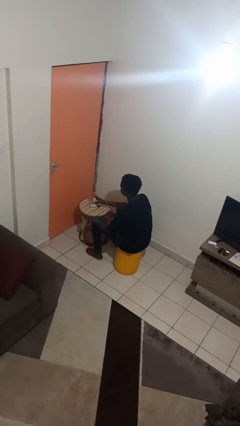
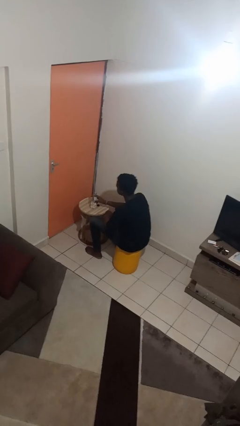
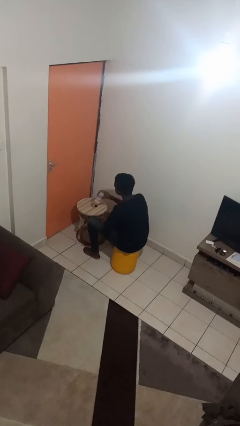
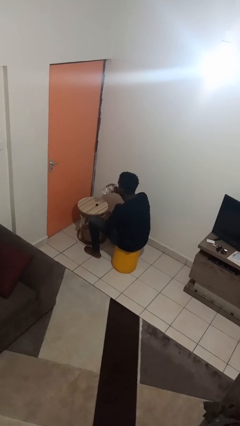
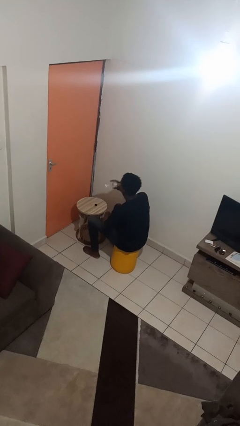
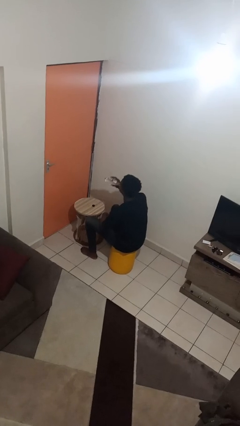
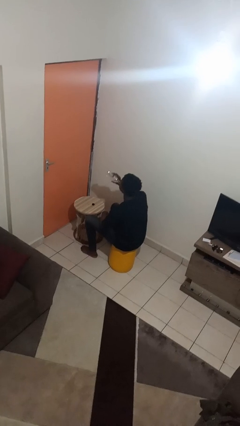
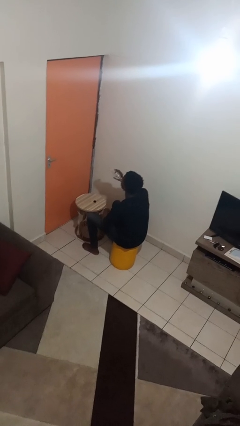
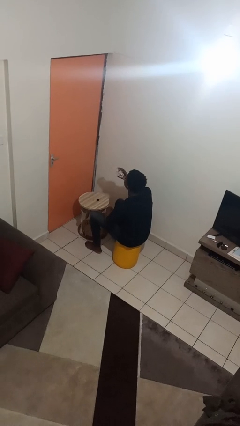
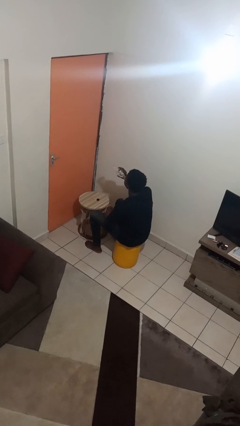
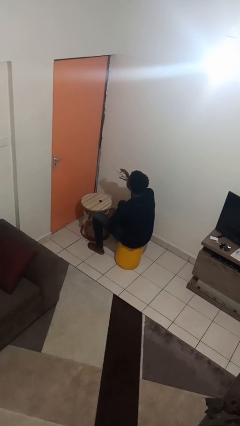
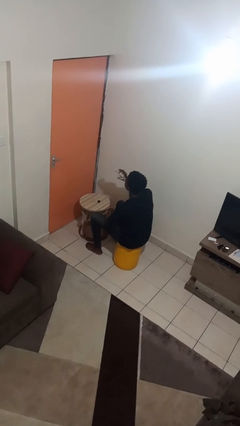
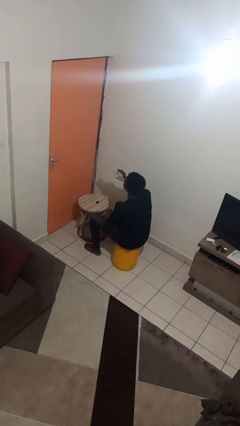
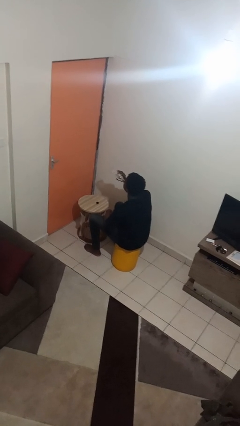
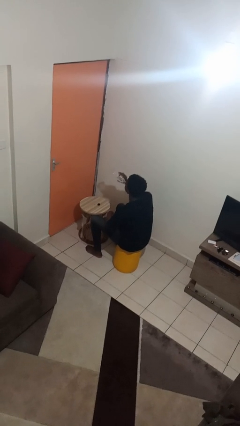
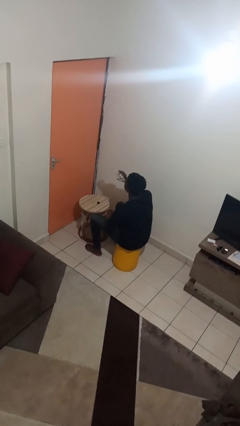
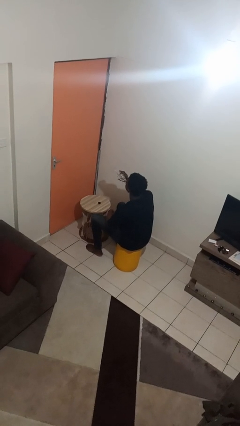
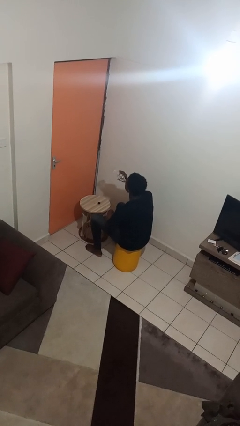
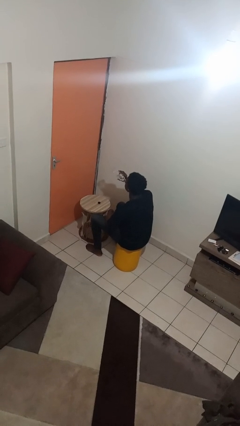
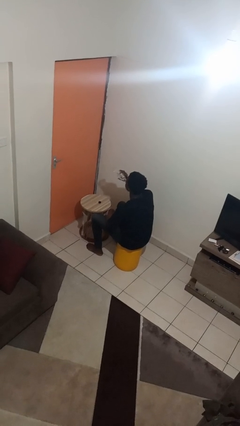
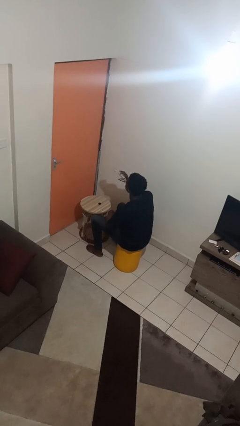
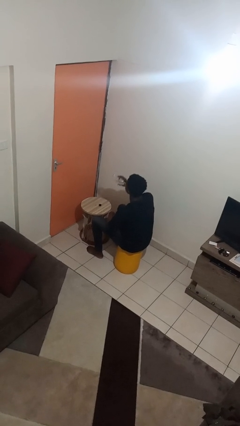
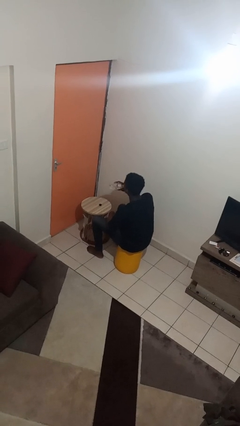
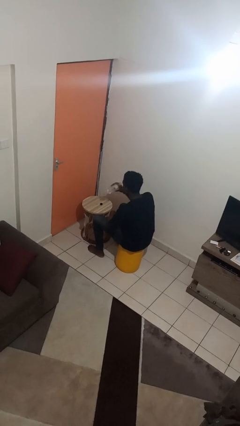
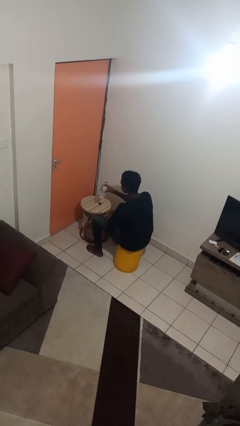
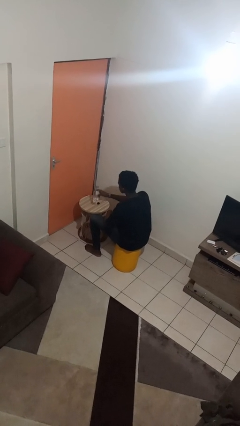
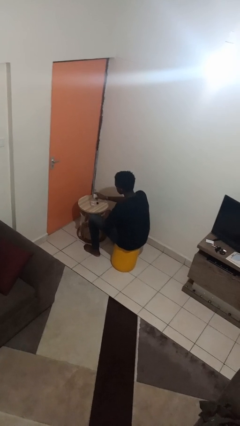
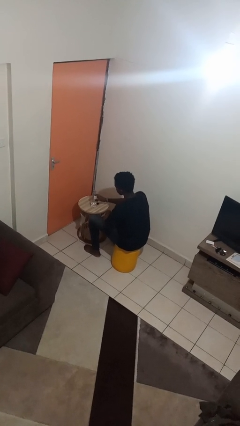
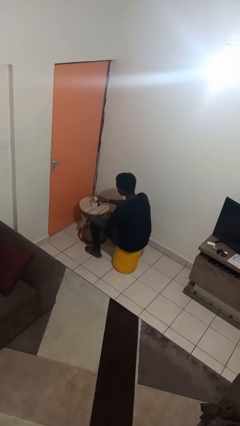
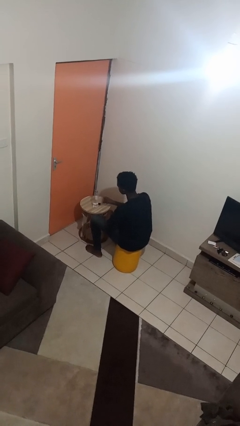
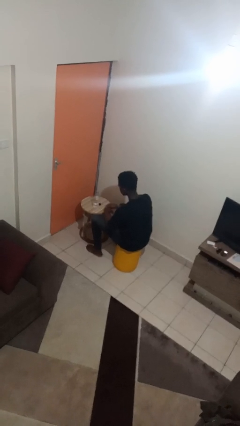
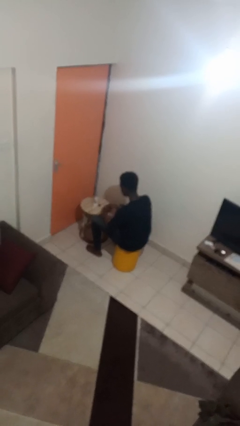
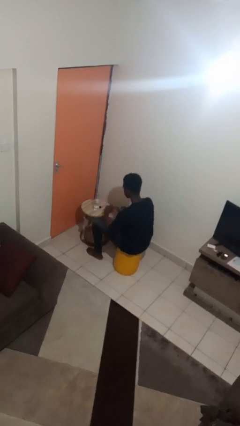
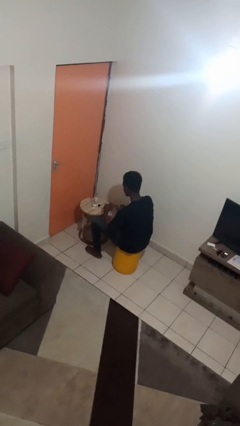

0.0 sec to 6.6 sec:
person drinks from bottle

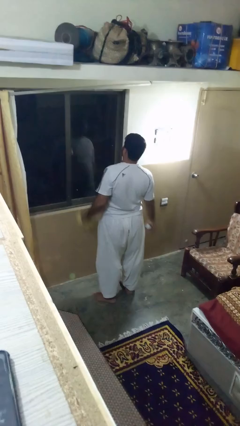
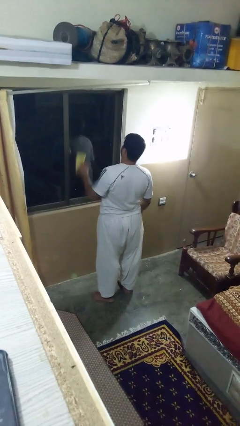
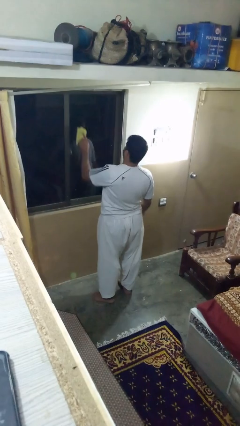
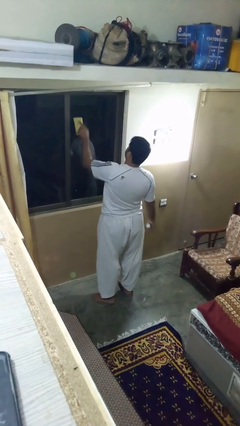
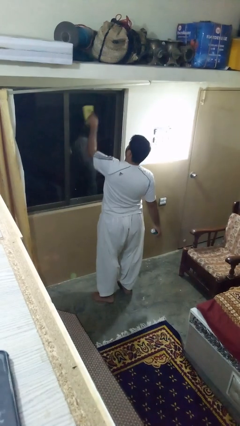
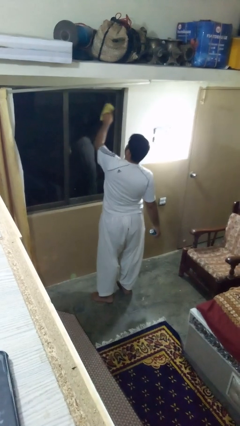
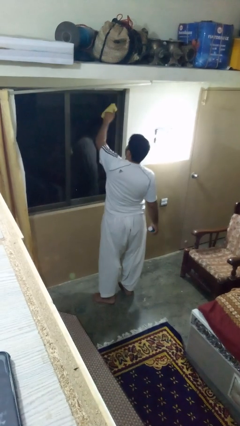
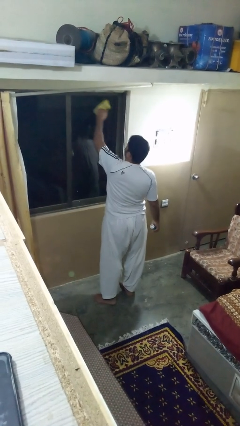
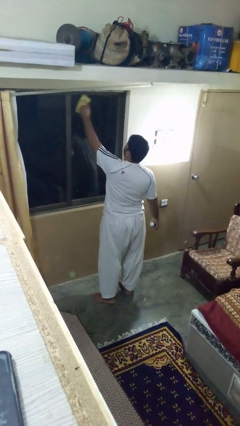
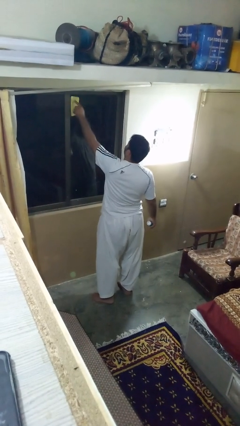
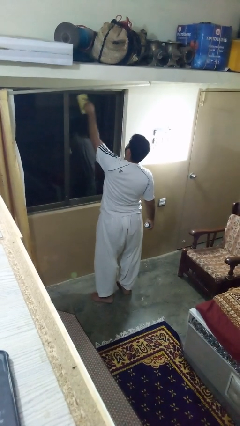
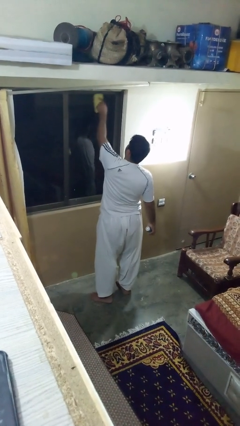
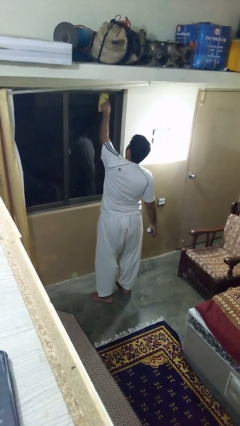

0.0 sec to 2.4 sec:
person washes window

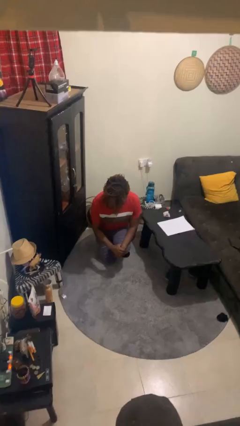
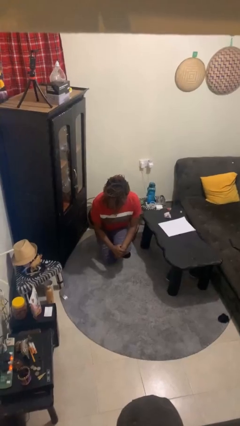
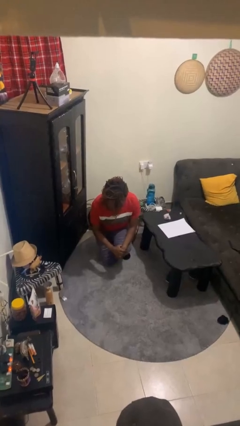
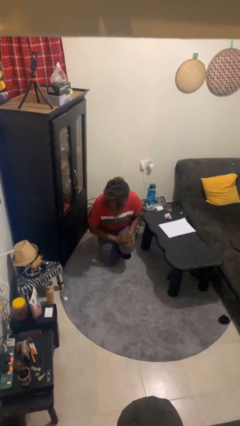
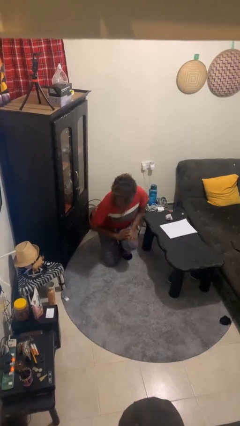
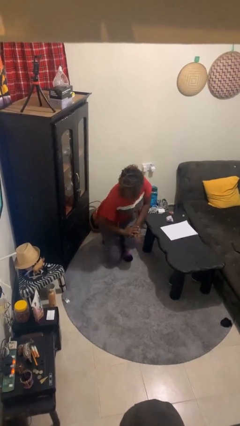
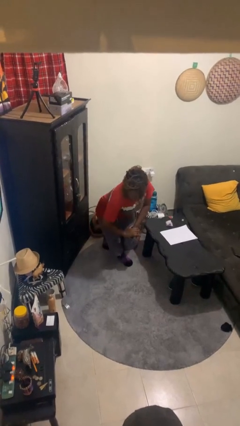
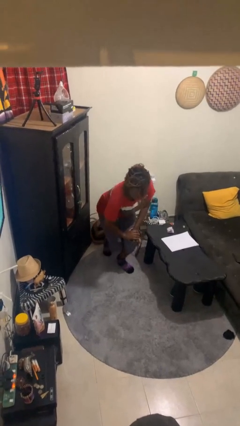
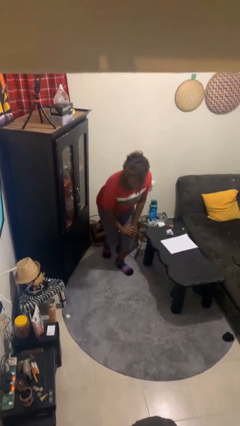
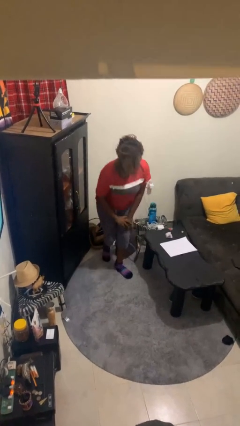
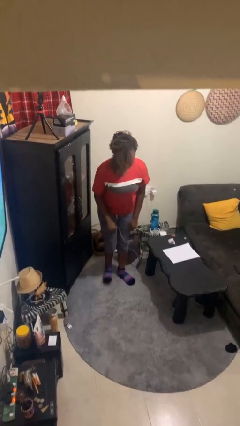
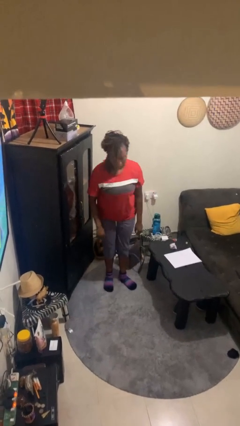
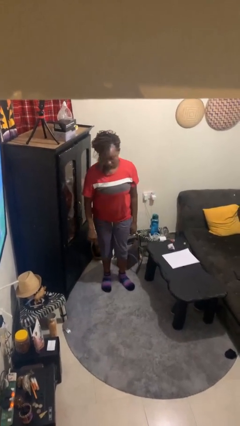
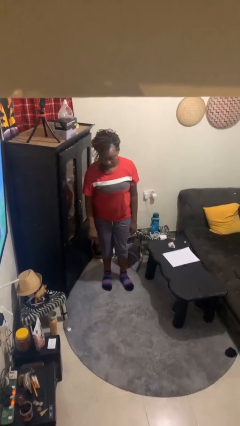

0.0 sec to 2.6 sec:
person stands up from floor

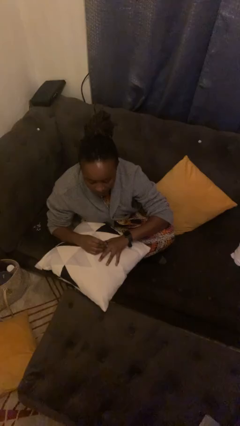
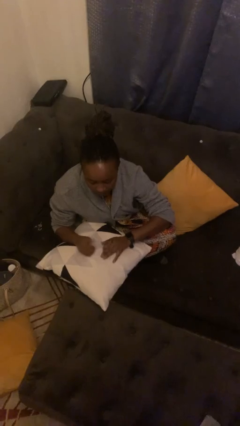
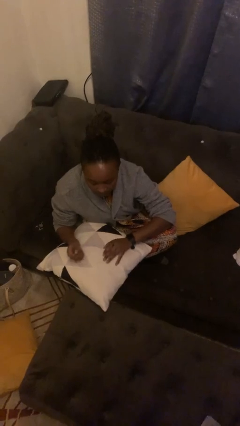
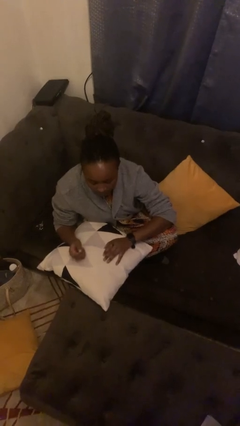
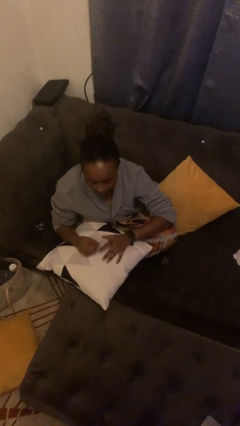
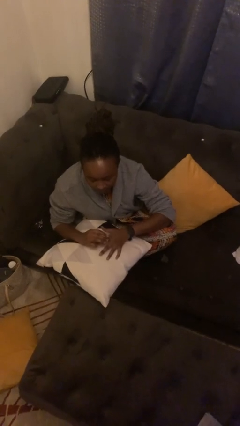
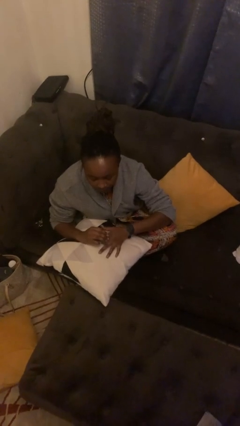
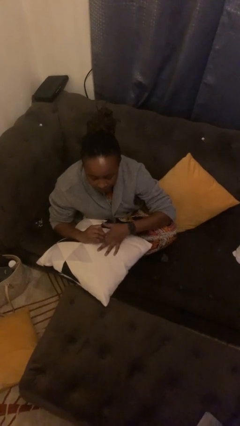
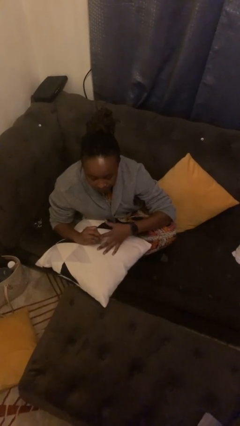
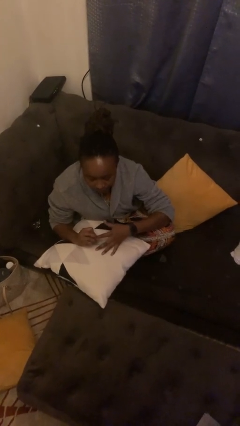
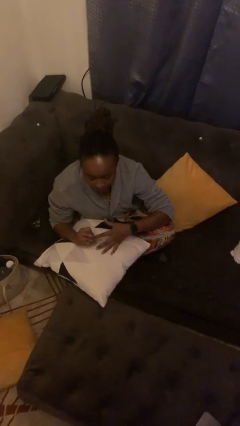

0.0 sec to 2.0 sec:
person puts on ring

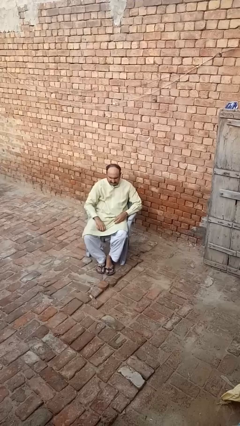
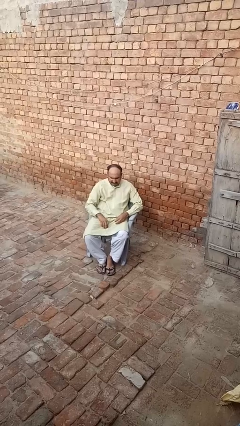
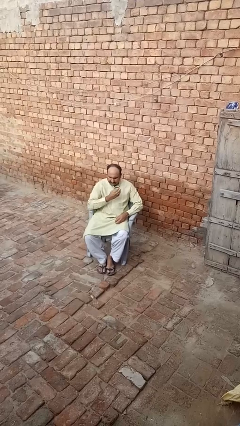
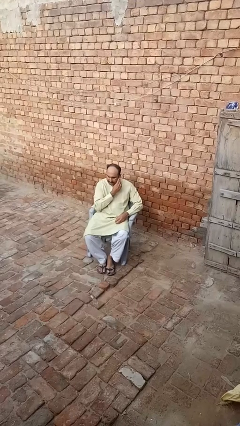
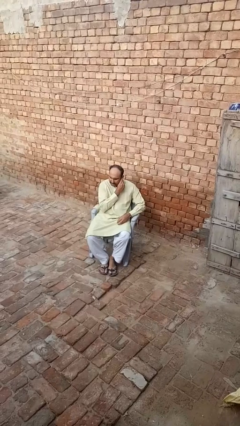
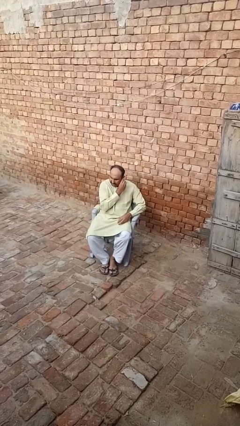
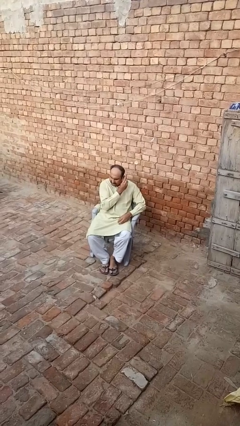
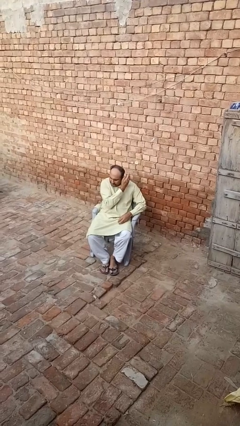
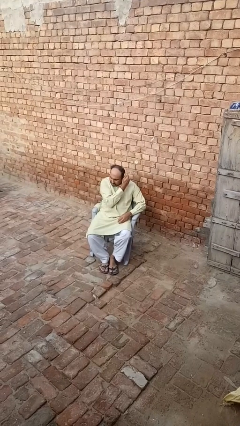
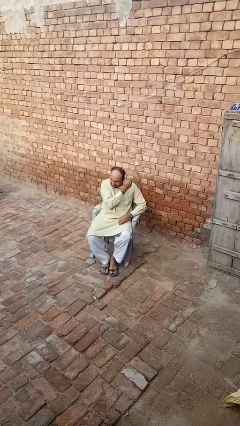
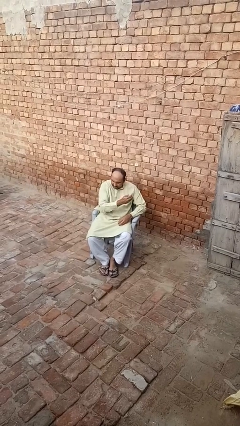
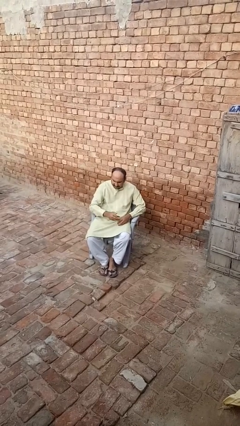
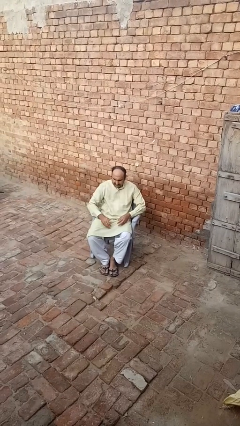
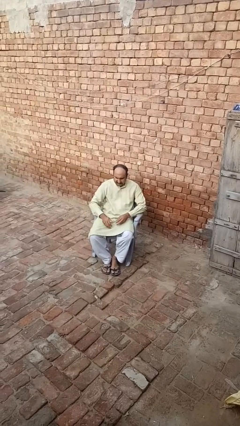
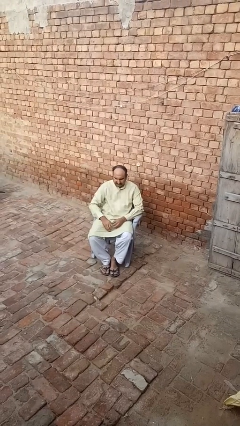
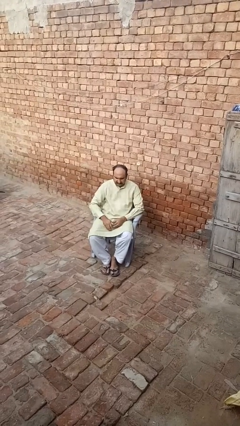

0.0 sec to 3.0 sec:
person takes off earrings

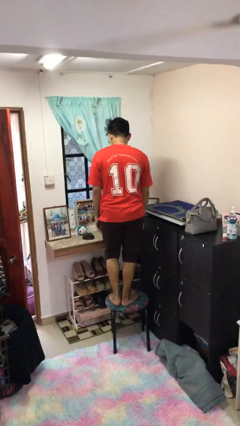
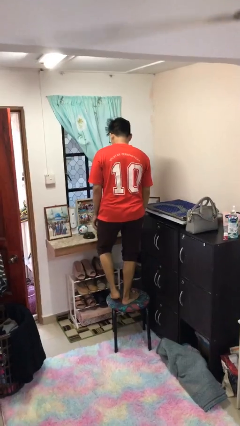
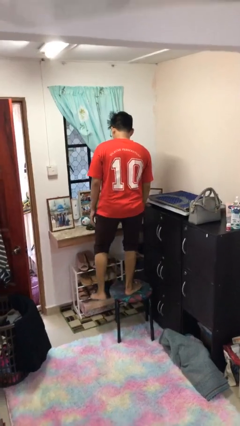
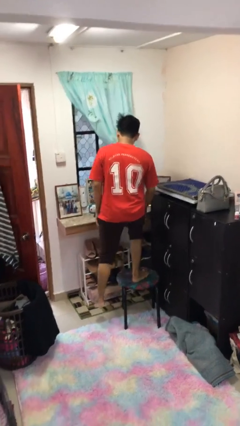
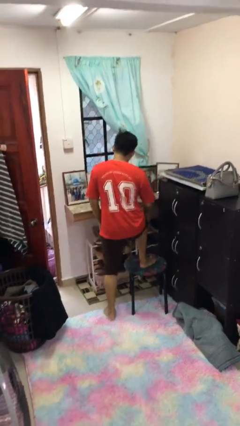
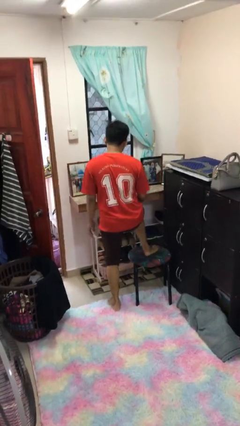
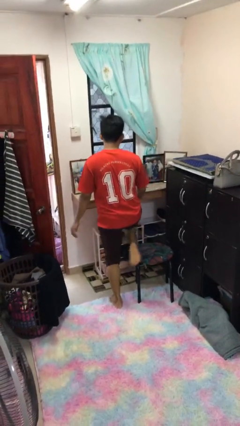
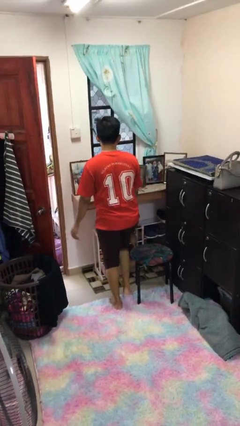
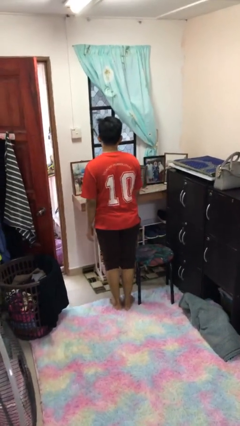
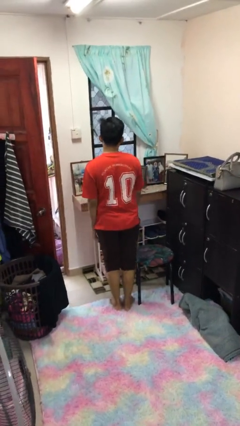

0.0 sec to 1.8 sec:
person climbs off chair
